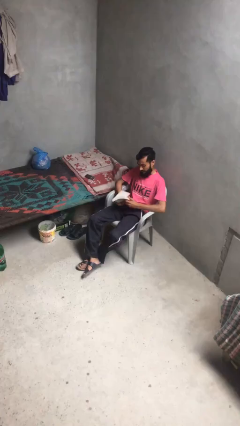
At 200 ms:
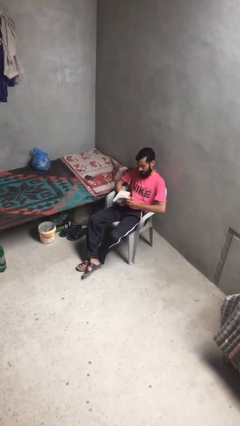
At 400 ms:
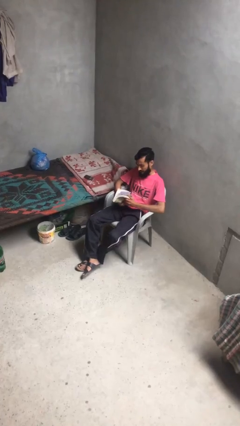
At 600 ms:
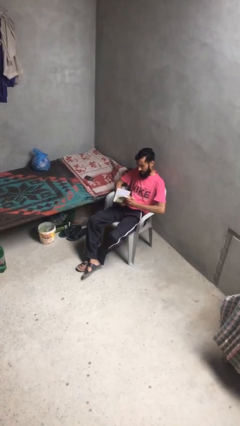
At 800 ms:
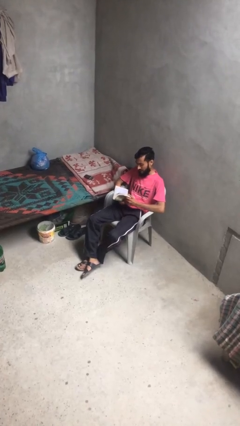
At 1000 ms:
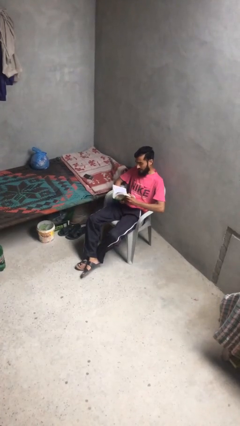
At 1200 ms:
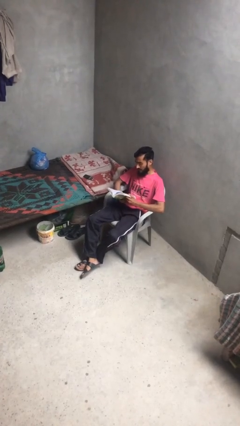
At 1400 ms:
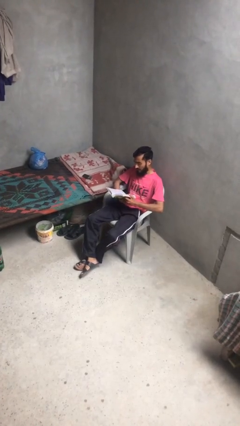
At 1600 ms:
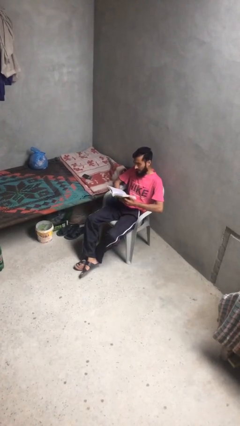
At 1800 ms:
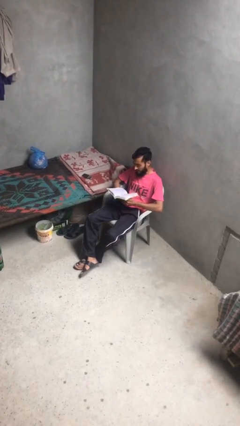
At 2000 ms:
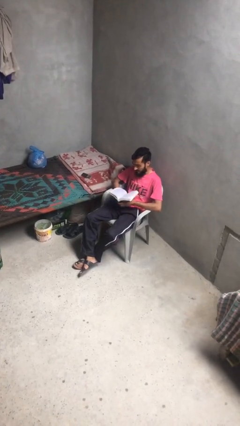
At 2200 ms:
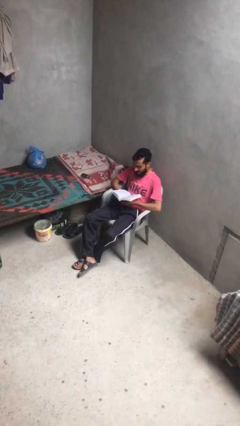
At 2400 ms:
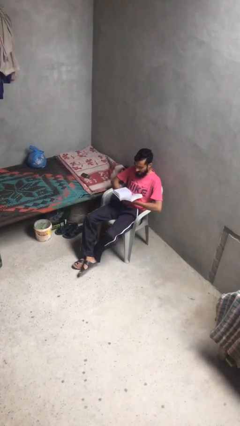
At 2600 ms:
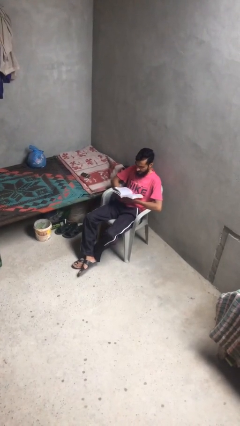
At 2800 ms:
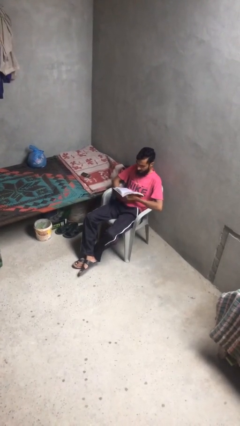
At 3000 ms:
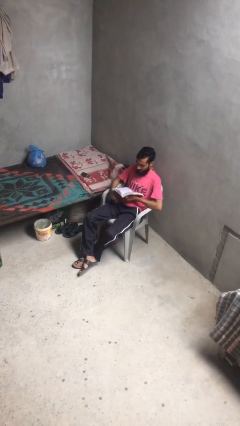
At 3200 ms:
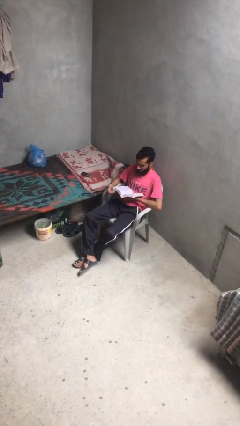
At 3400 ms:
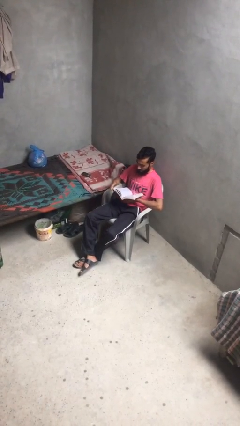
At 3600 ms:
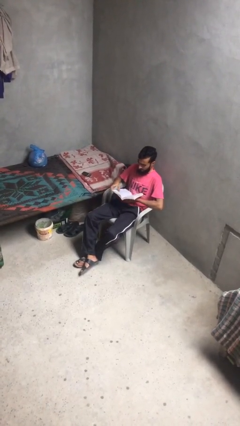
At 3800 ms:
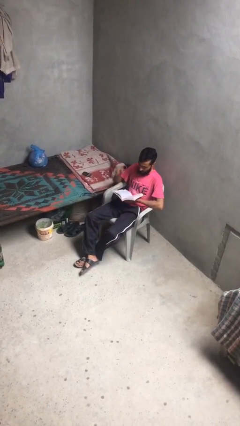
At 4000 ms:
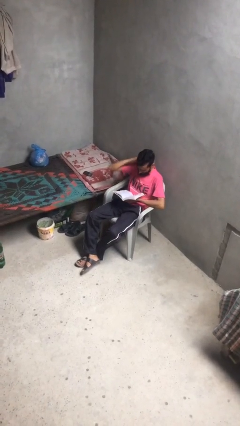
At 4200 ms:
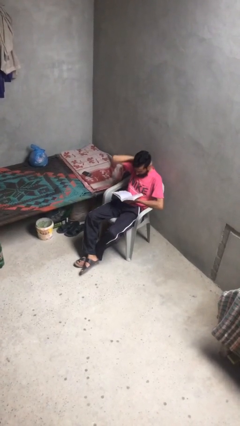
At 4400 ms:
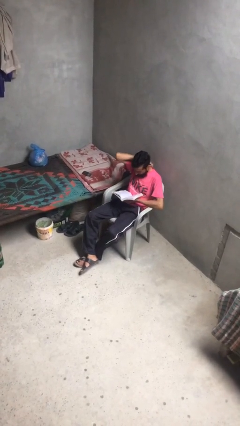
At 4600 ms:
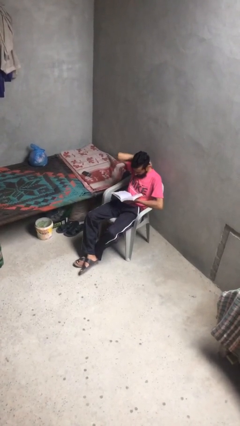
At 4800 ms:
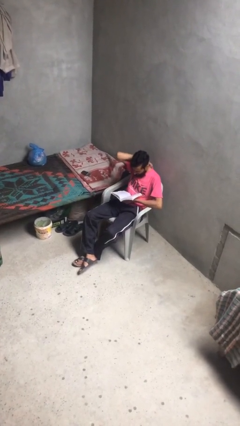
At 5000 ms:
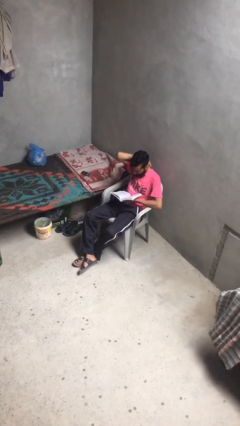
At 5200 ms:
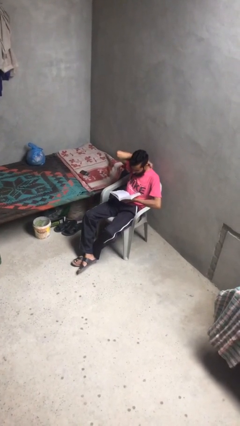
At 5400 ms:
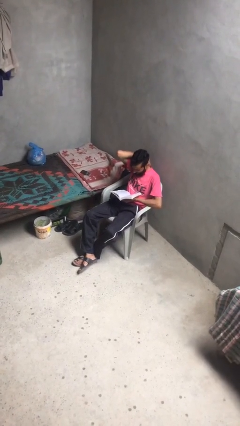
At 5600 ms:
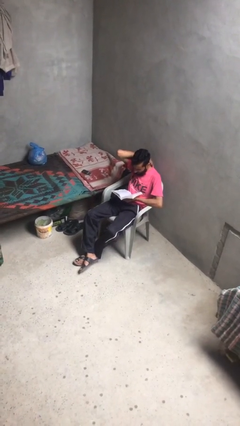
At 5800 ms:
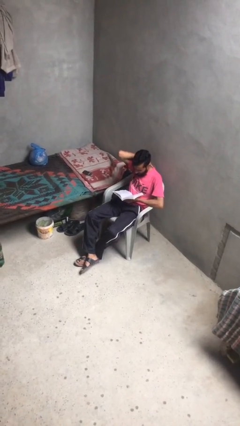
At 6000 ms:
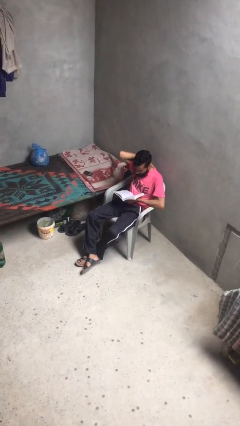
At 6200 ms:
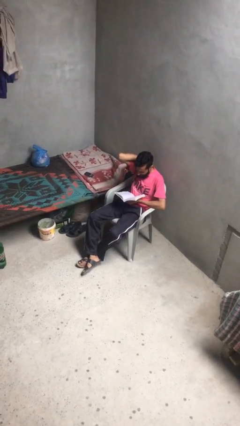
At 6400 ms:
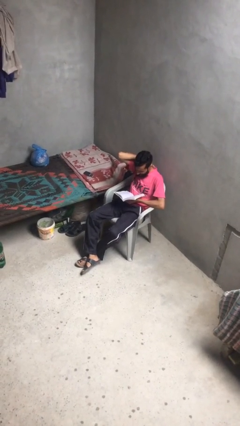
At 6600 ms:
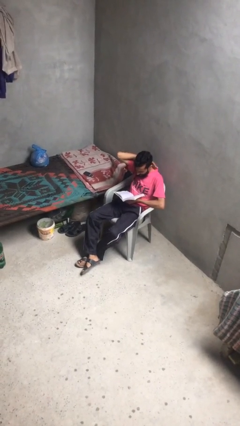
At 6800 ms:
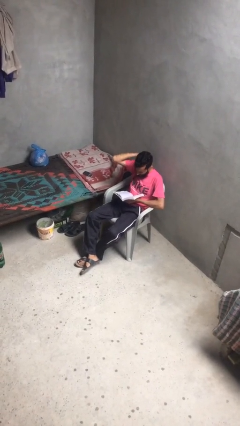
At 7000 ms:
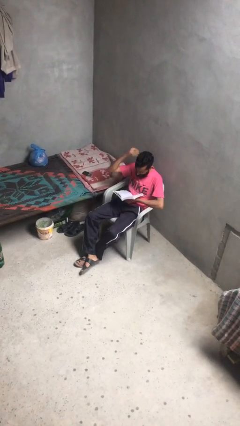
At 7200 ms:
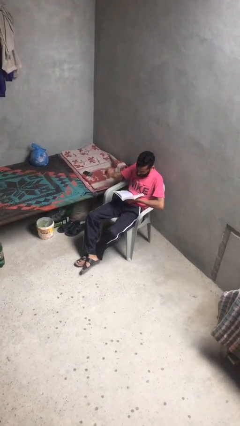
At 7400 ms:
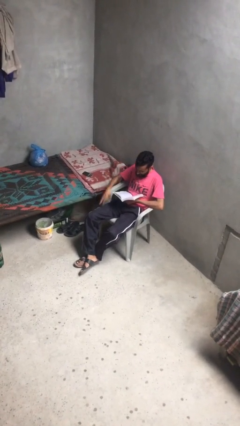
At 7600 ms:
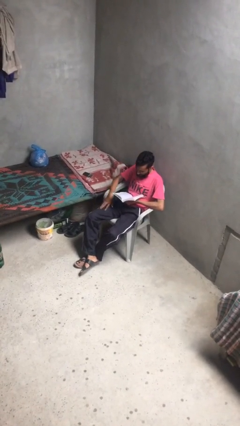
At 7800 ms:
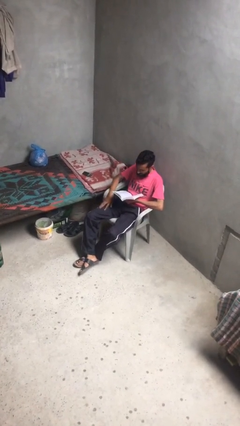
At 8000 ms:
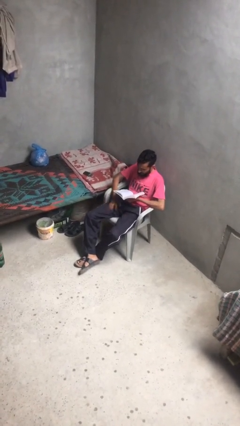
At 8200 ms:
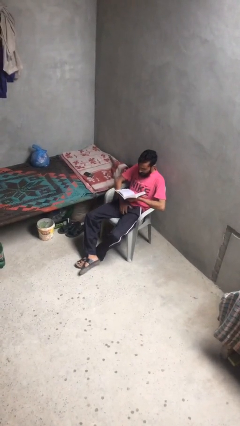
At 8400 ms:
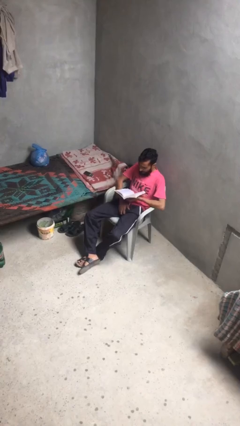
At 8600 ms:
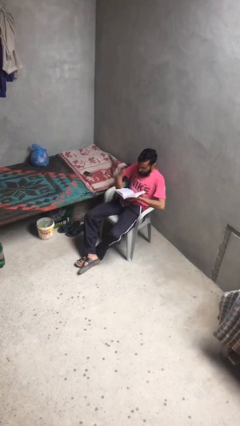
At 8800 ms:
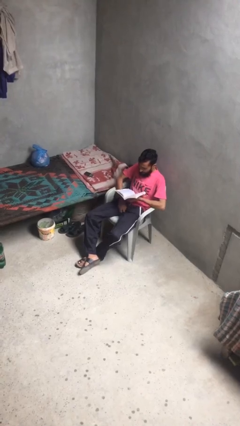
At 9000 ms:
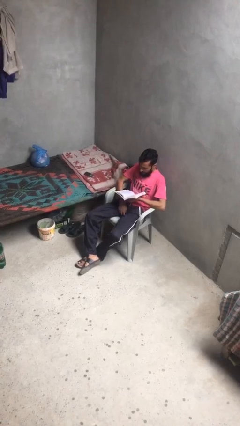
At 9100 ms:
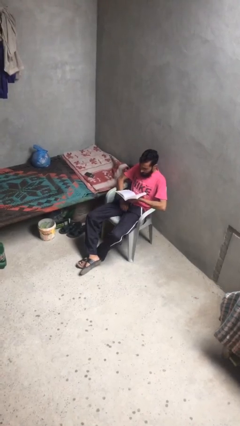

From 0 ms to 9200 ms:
person reads document

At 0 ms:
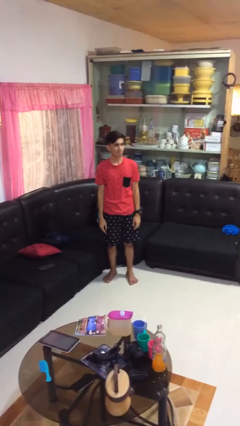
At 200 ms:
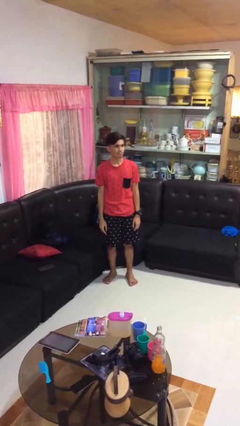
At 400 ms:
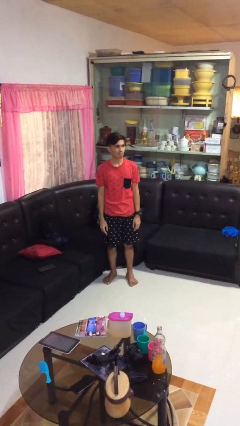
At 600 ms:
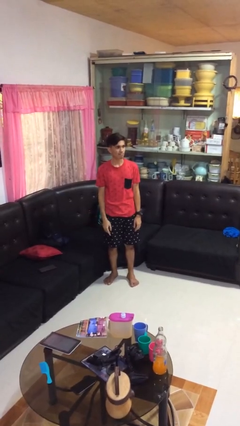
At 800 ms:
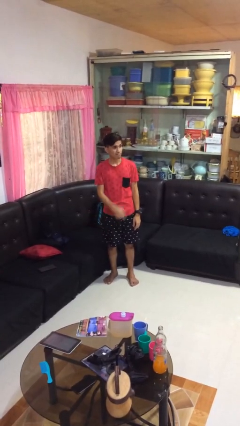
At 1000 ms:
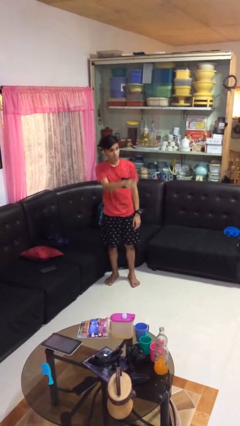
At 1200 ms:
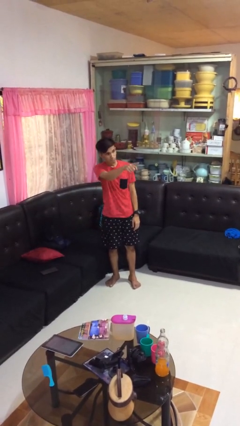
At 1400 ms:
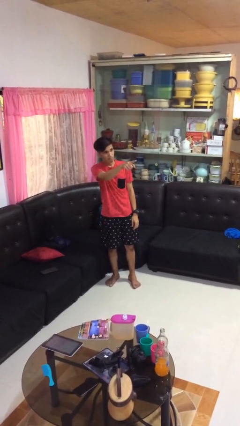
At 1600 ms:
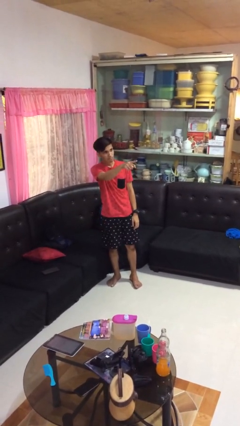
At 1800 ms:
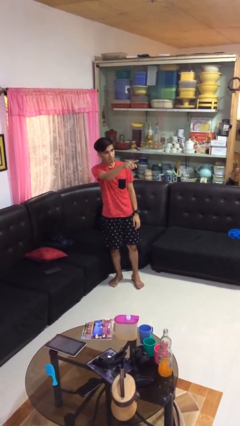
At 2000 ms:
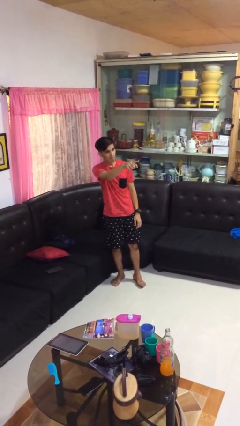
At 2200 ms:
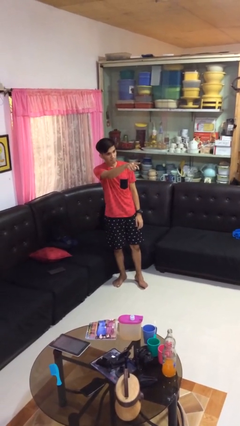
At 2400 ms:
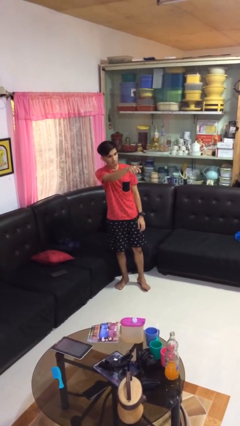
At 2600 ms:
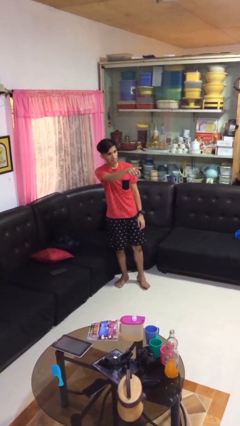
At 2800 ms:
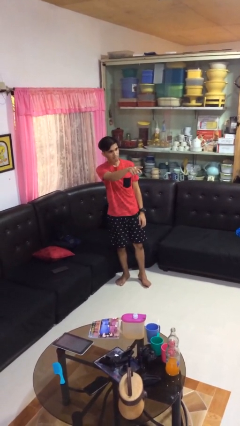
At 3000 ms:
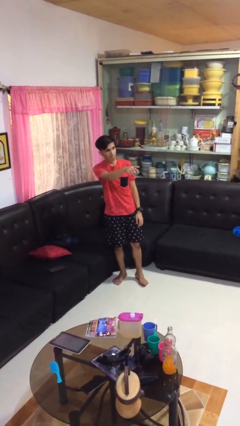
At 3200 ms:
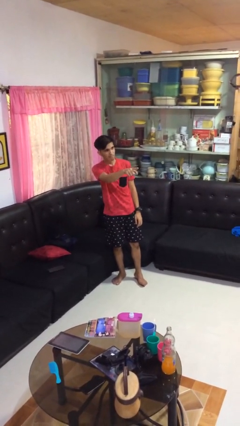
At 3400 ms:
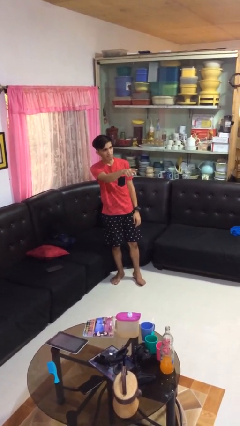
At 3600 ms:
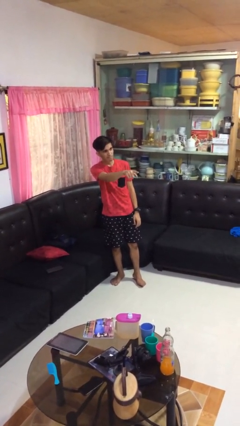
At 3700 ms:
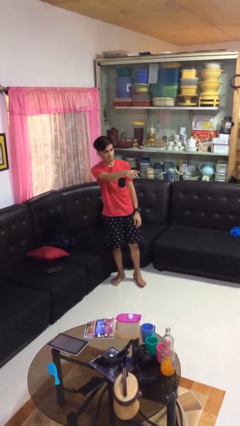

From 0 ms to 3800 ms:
person points at person

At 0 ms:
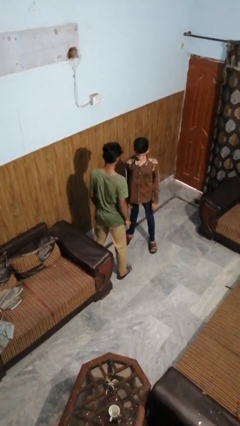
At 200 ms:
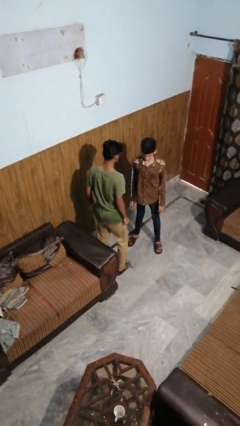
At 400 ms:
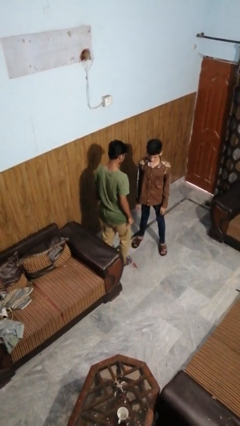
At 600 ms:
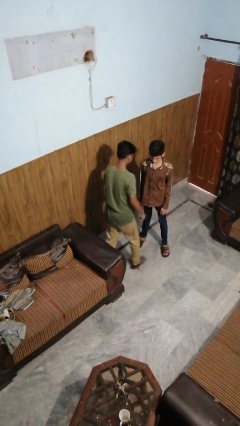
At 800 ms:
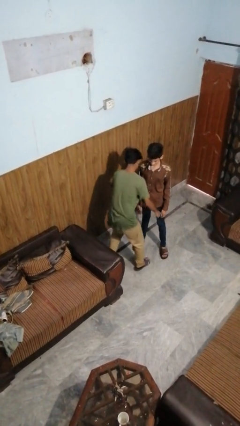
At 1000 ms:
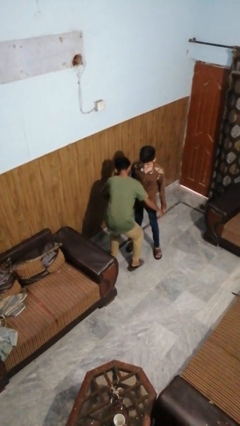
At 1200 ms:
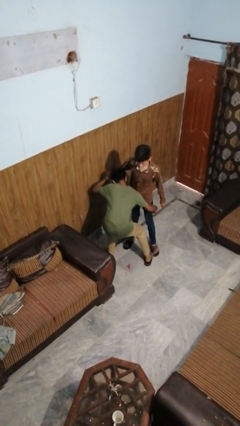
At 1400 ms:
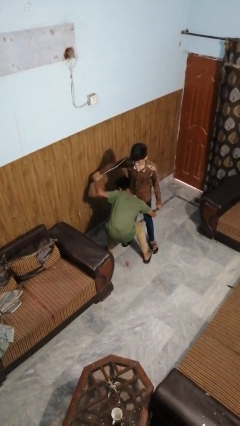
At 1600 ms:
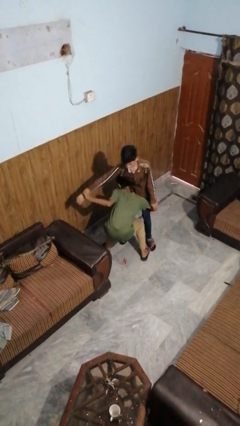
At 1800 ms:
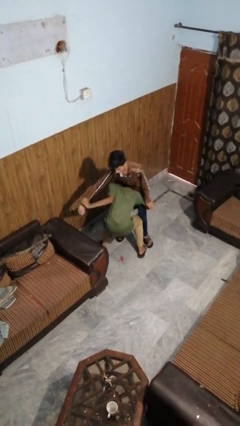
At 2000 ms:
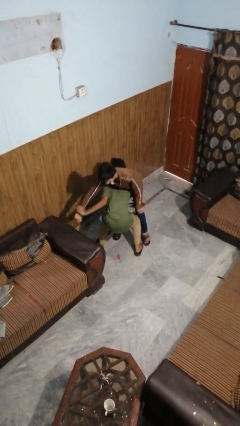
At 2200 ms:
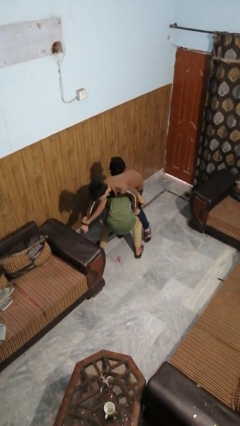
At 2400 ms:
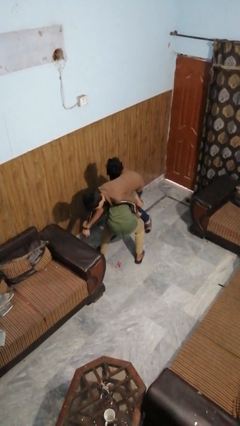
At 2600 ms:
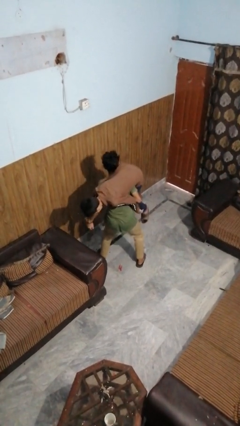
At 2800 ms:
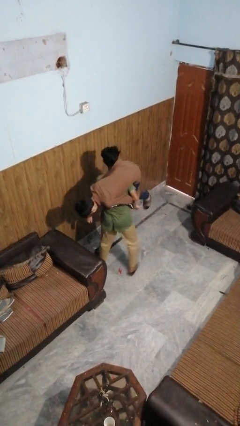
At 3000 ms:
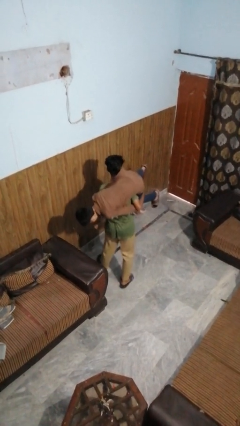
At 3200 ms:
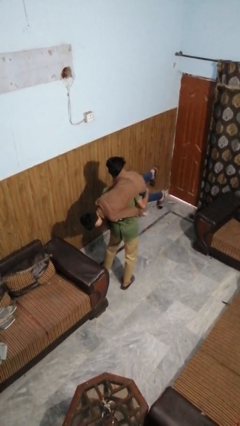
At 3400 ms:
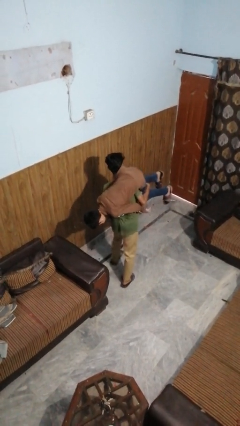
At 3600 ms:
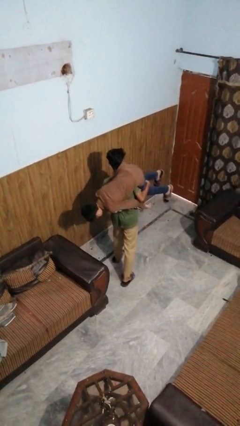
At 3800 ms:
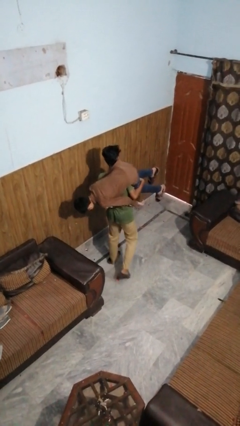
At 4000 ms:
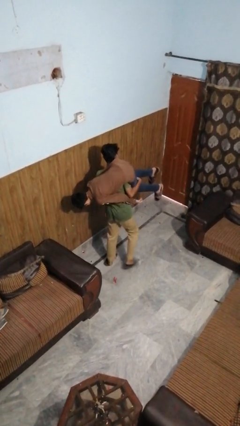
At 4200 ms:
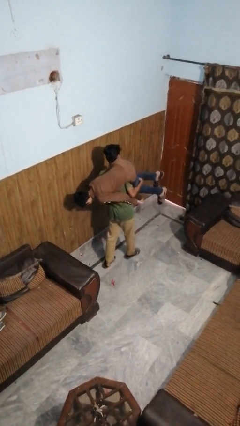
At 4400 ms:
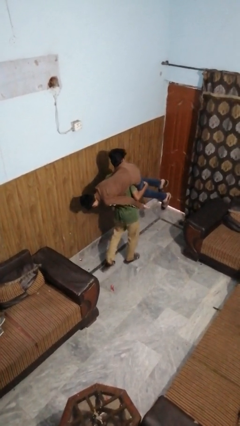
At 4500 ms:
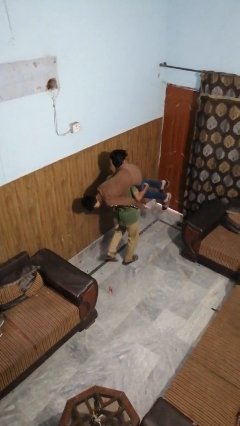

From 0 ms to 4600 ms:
person carries person on shoulders

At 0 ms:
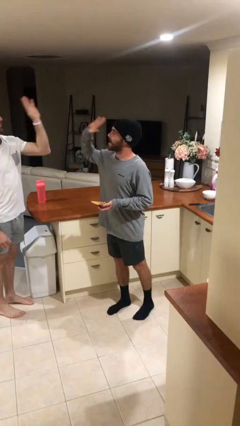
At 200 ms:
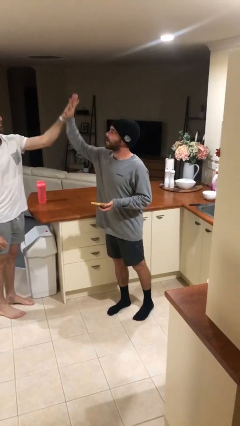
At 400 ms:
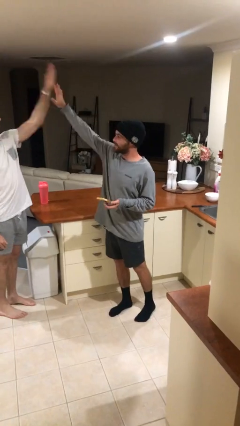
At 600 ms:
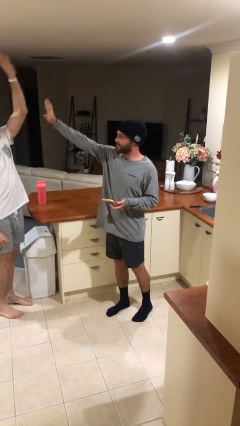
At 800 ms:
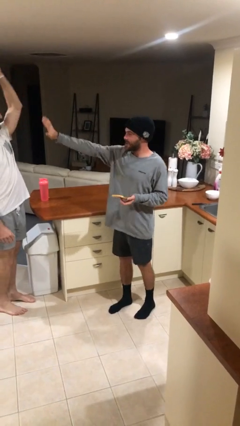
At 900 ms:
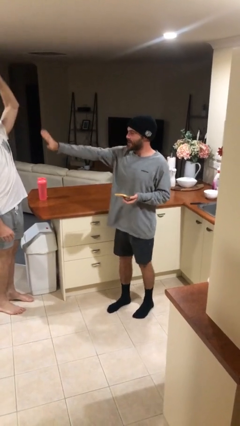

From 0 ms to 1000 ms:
person highfives hand
